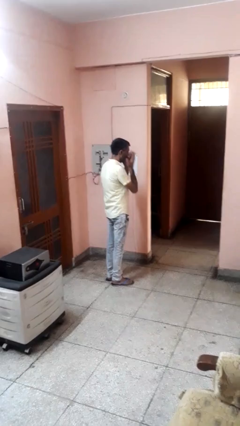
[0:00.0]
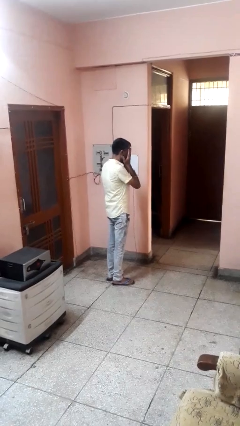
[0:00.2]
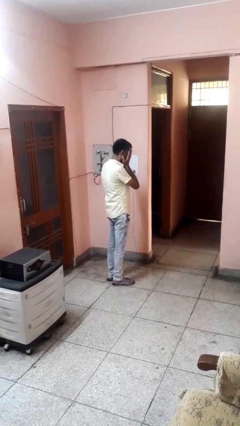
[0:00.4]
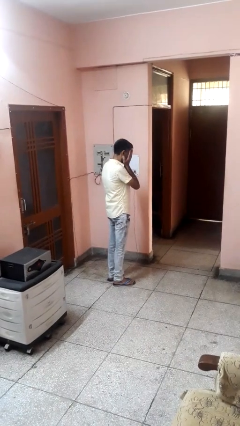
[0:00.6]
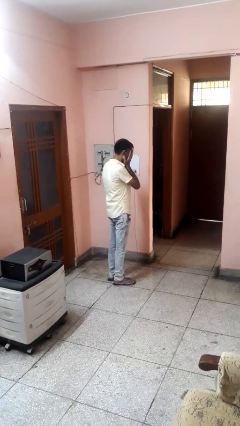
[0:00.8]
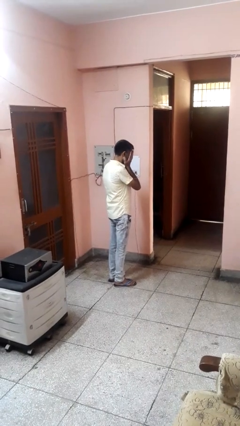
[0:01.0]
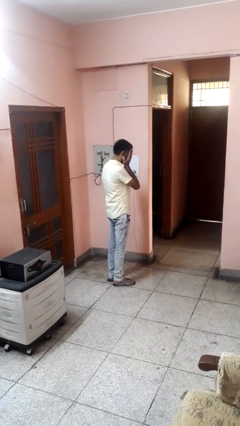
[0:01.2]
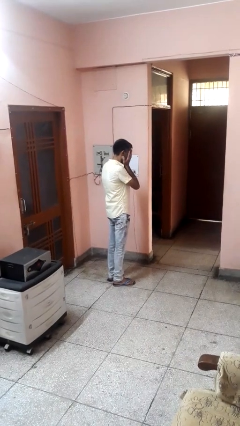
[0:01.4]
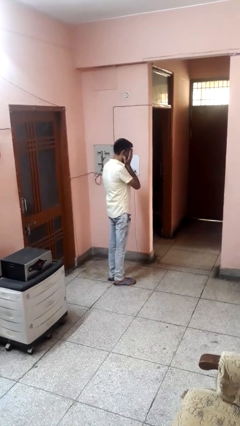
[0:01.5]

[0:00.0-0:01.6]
person covers face with hands

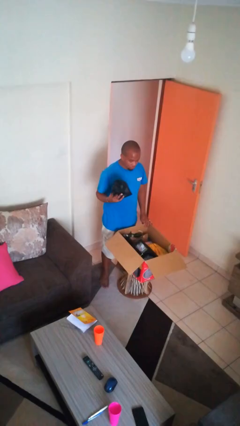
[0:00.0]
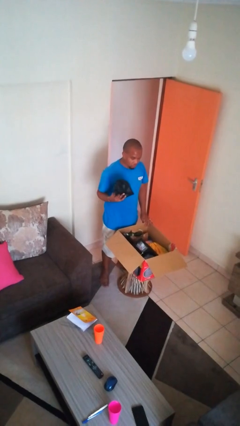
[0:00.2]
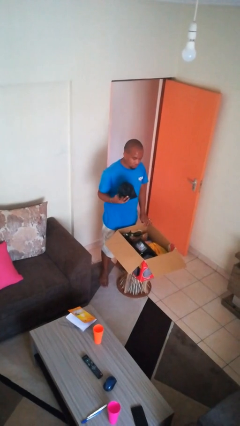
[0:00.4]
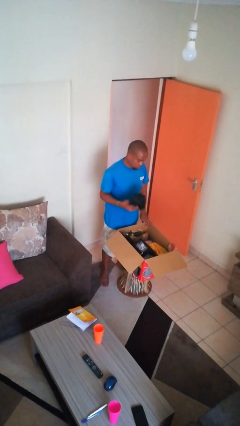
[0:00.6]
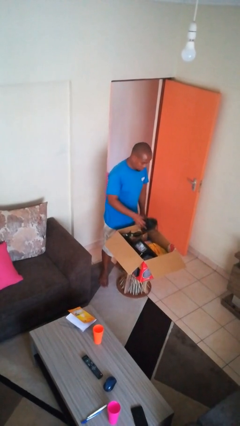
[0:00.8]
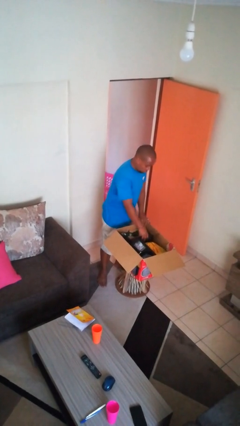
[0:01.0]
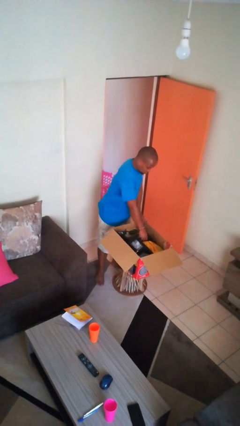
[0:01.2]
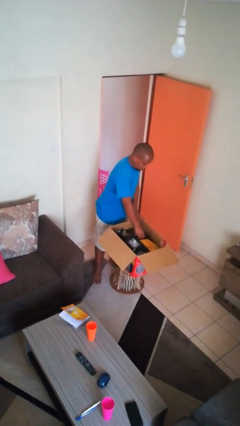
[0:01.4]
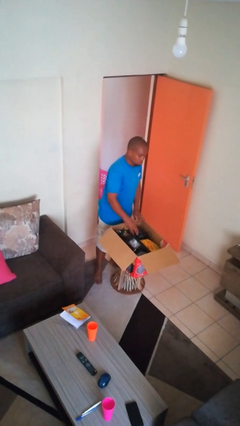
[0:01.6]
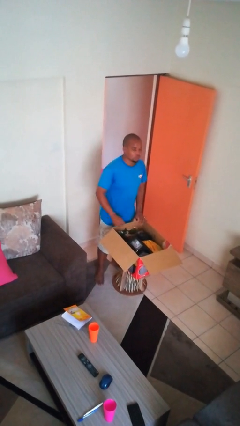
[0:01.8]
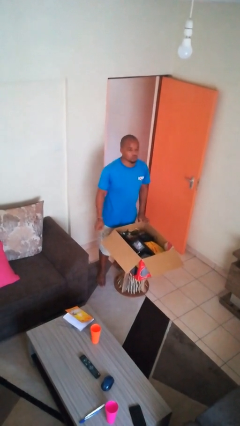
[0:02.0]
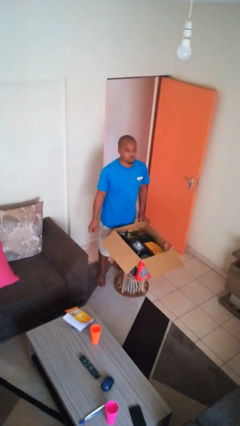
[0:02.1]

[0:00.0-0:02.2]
person puts object into box

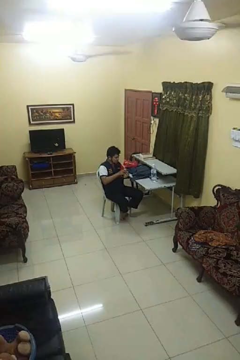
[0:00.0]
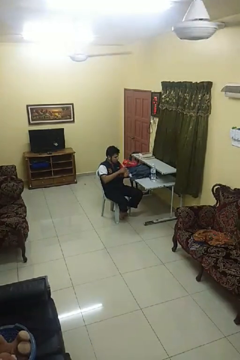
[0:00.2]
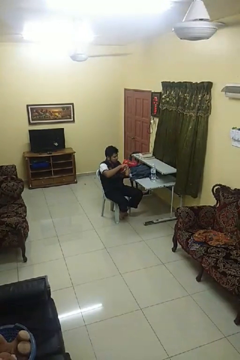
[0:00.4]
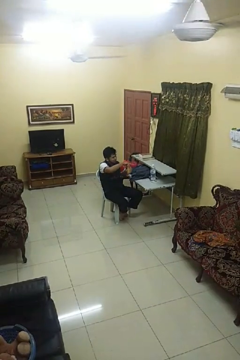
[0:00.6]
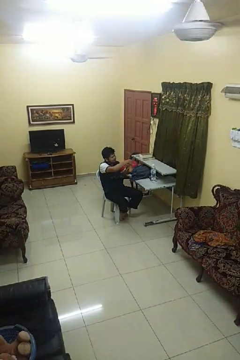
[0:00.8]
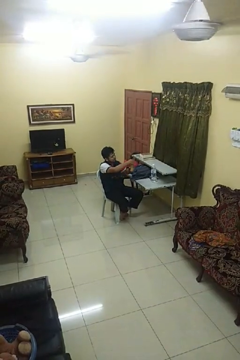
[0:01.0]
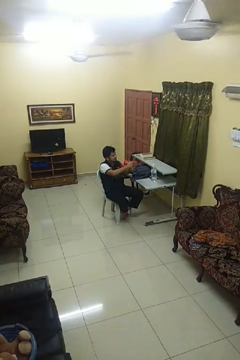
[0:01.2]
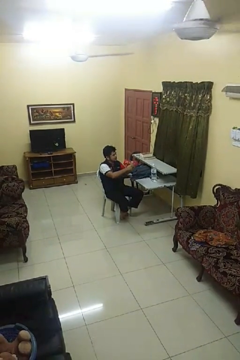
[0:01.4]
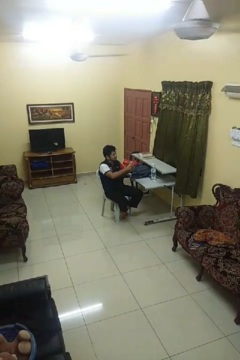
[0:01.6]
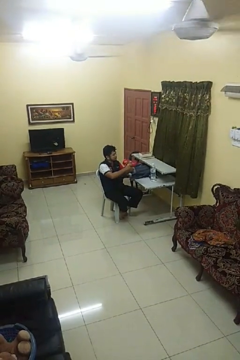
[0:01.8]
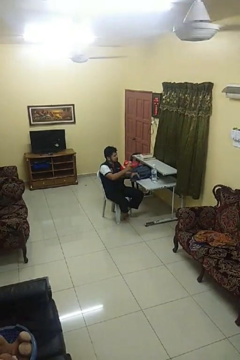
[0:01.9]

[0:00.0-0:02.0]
person opens beverage can

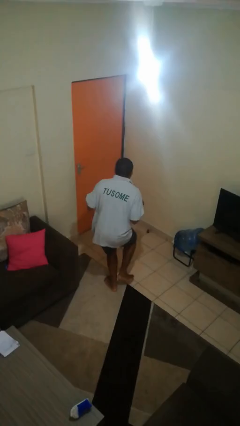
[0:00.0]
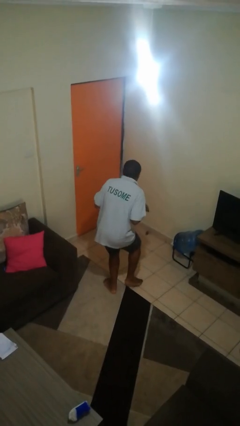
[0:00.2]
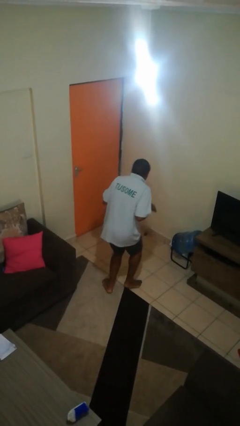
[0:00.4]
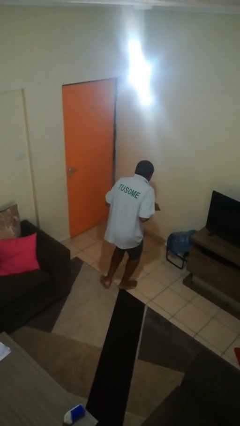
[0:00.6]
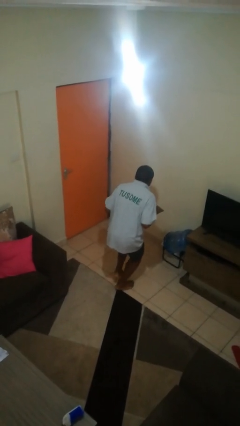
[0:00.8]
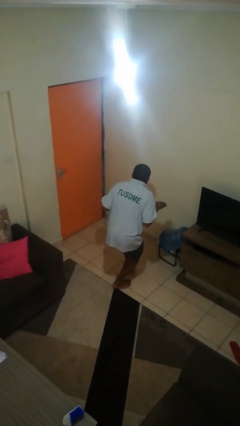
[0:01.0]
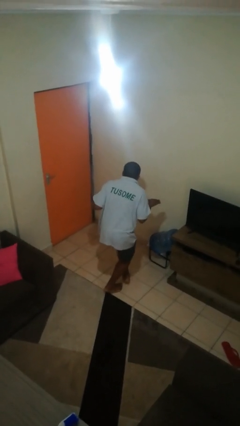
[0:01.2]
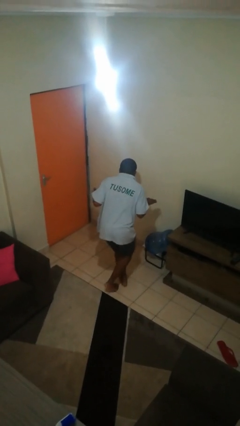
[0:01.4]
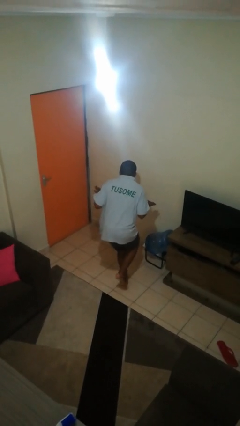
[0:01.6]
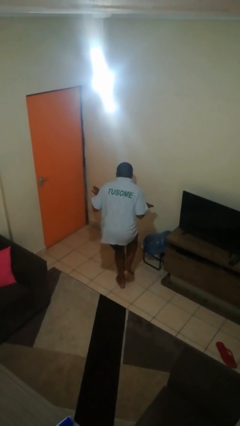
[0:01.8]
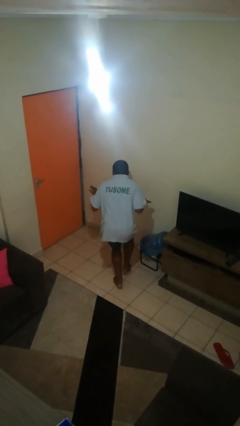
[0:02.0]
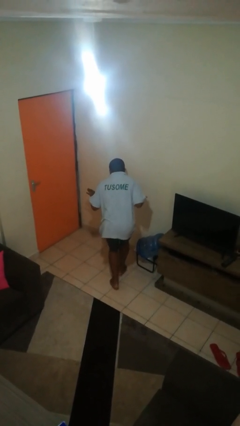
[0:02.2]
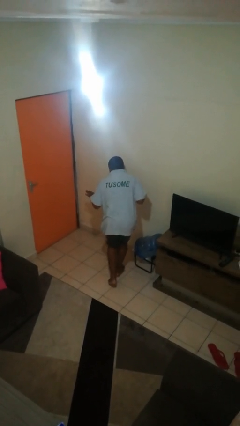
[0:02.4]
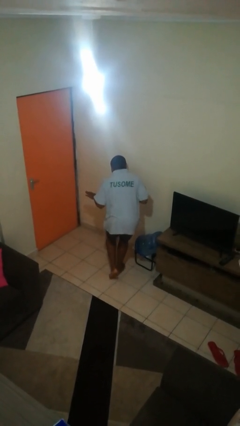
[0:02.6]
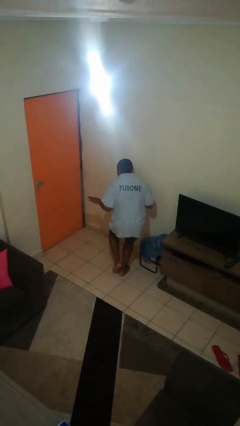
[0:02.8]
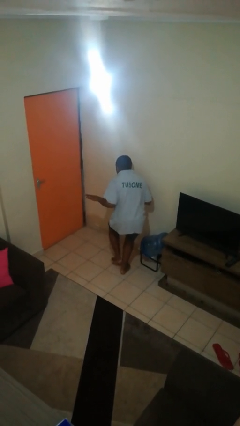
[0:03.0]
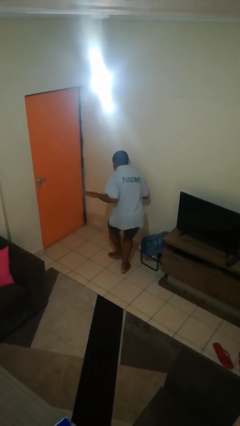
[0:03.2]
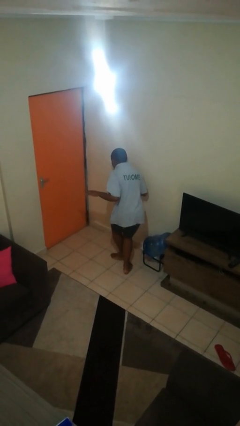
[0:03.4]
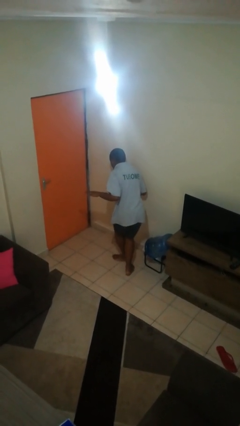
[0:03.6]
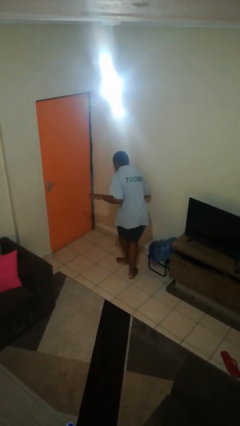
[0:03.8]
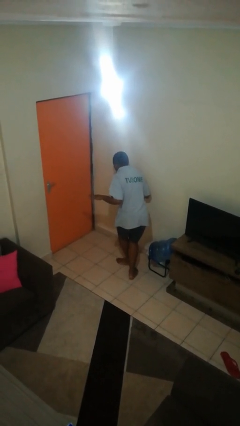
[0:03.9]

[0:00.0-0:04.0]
person walks tiptoe

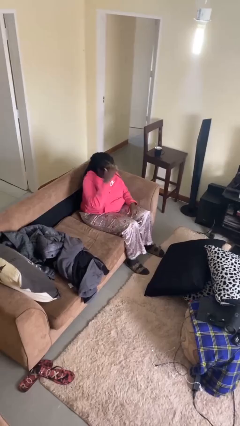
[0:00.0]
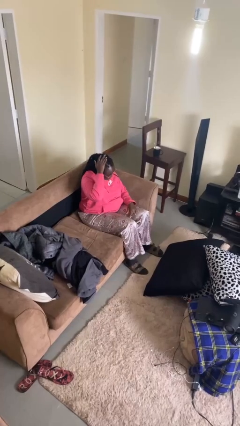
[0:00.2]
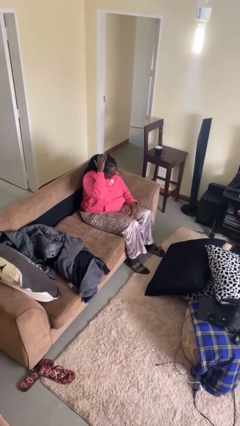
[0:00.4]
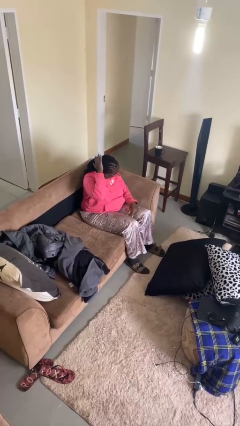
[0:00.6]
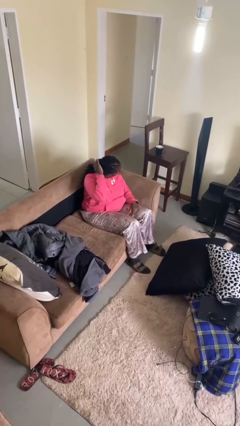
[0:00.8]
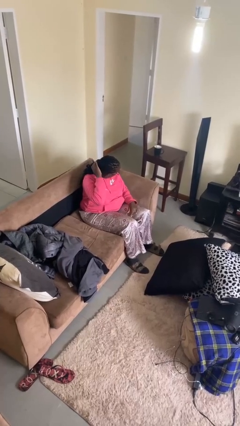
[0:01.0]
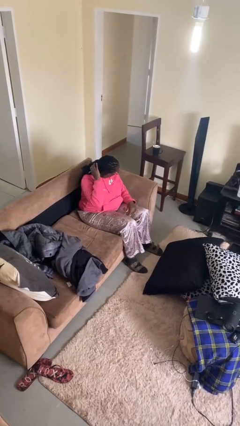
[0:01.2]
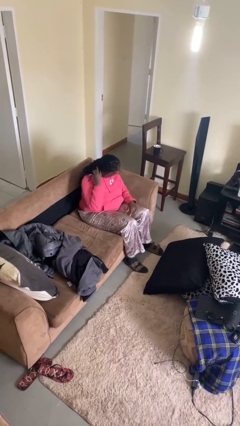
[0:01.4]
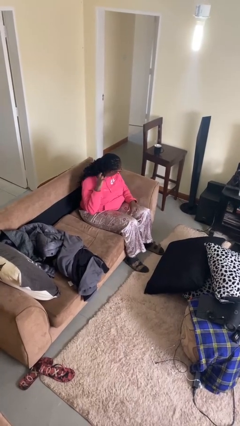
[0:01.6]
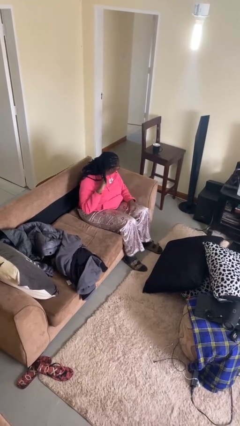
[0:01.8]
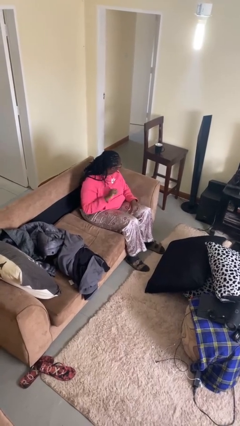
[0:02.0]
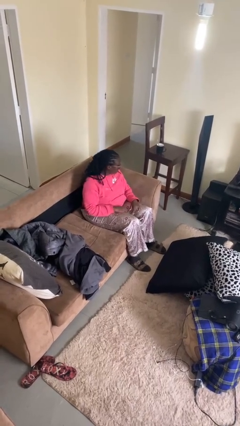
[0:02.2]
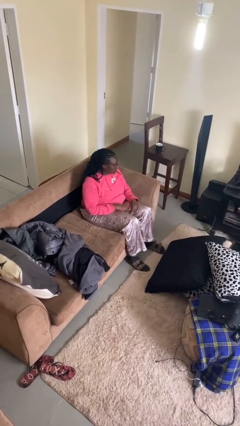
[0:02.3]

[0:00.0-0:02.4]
person strokes hair

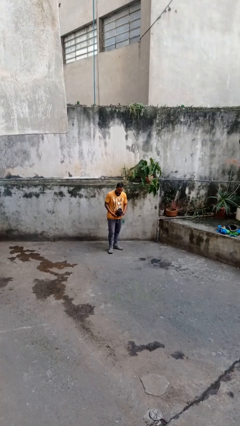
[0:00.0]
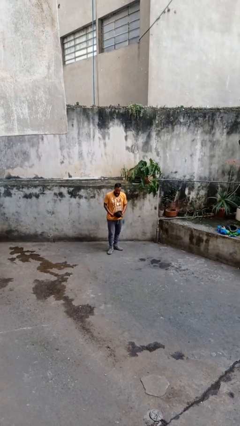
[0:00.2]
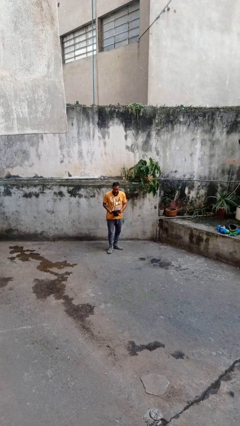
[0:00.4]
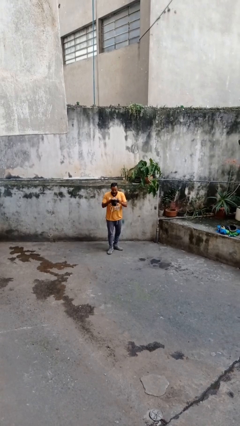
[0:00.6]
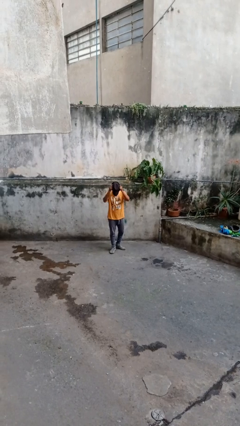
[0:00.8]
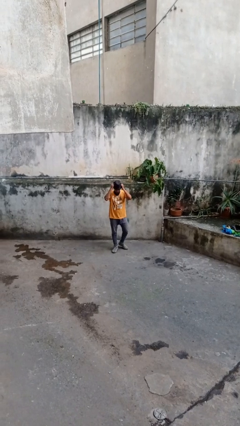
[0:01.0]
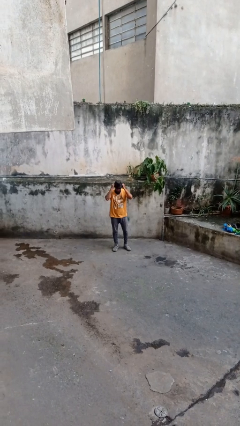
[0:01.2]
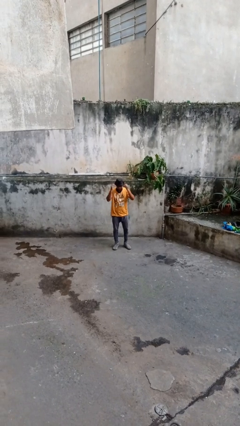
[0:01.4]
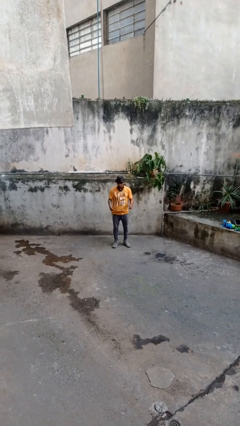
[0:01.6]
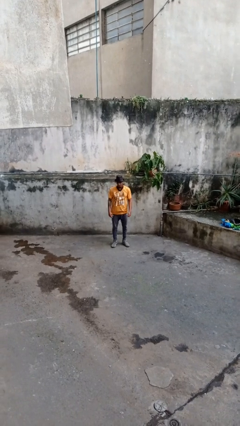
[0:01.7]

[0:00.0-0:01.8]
person puts on hat

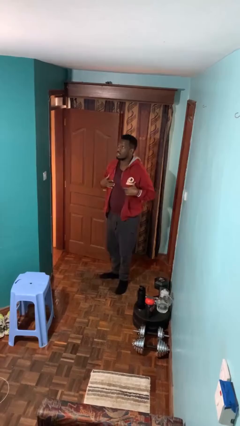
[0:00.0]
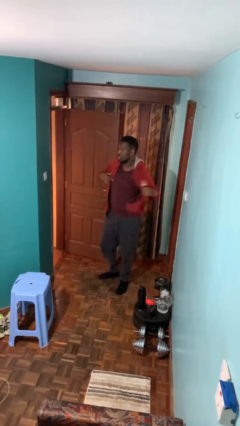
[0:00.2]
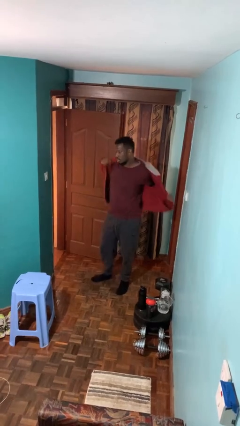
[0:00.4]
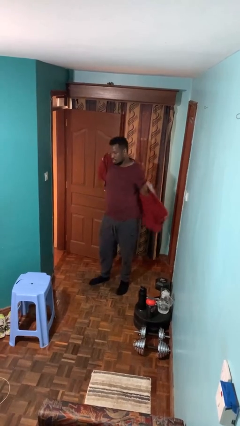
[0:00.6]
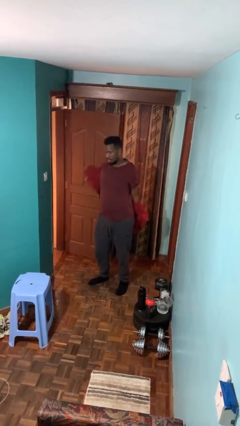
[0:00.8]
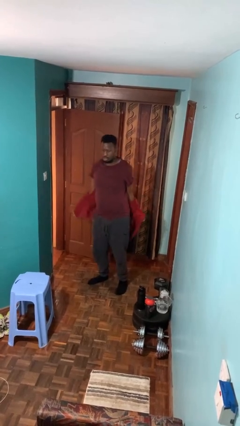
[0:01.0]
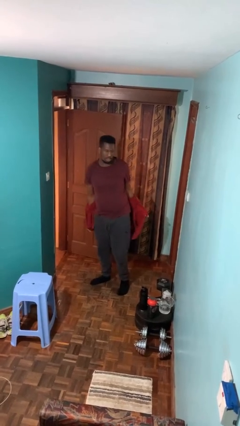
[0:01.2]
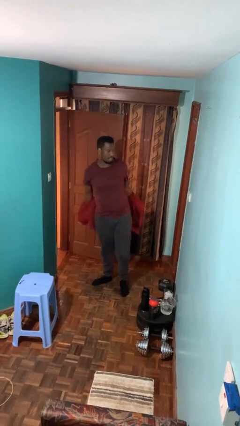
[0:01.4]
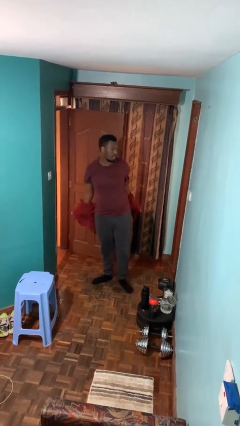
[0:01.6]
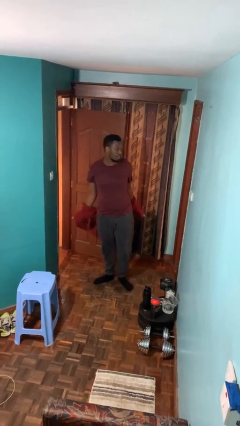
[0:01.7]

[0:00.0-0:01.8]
person takes off jacket

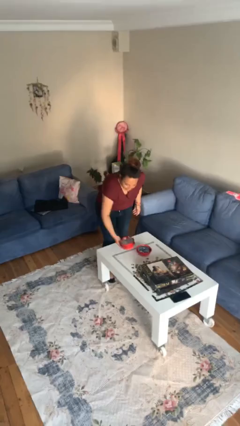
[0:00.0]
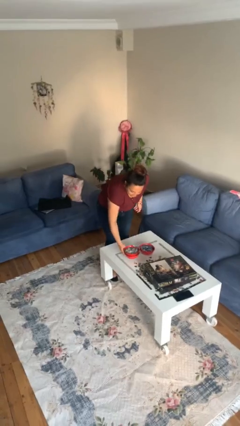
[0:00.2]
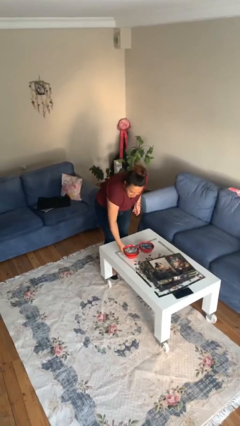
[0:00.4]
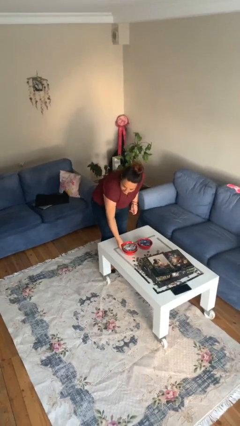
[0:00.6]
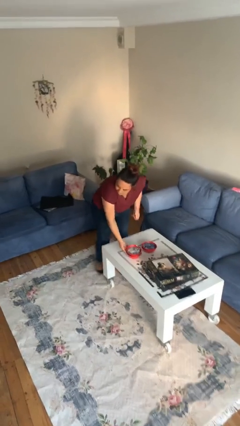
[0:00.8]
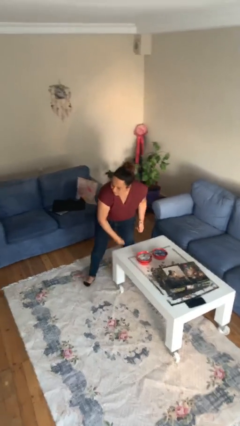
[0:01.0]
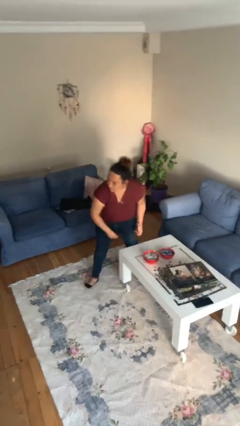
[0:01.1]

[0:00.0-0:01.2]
person puts down object on table

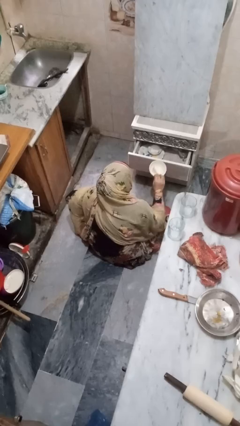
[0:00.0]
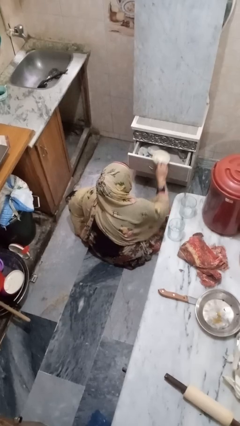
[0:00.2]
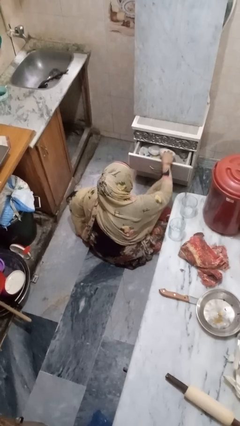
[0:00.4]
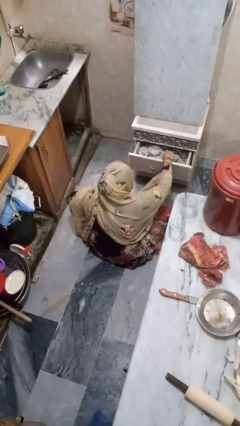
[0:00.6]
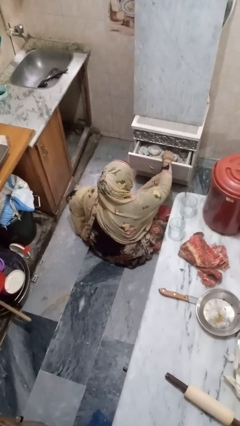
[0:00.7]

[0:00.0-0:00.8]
person puts object into kitchen drawer
